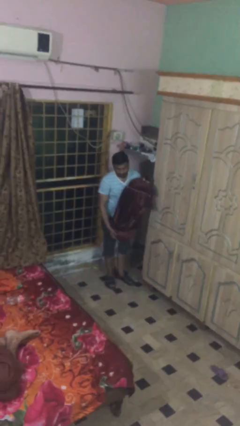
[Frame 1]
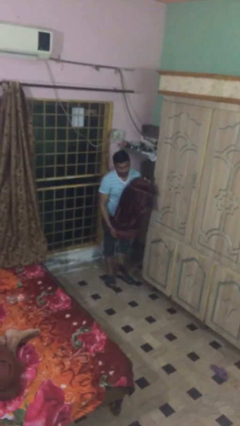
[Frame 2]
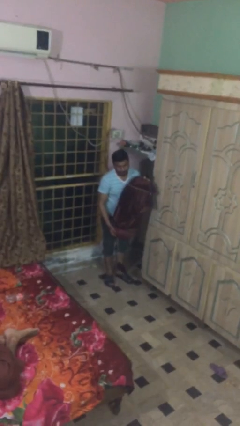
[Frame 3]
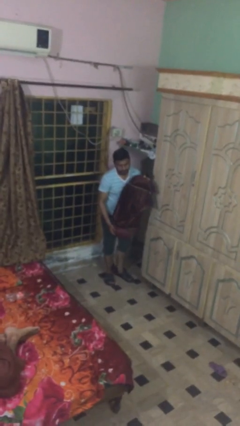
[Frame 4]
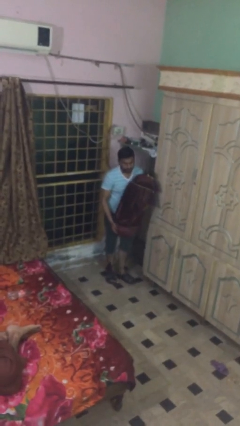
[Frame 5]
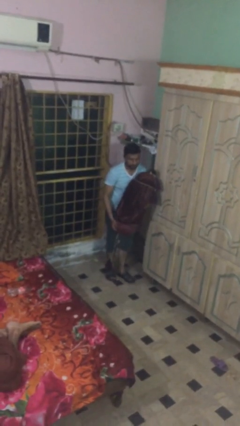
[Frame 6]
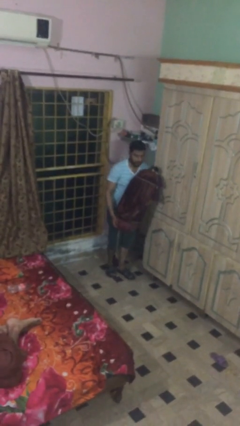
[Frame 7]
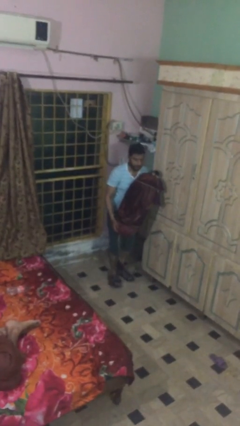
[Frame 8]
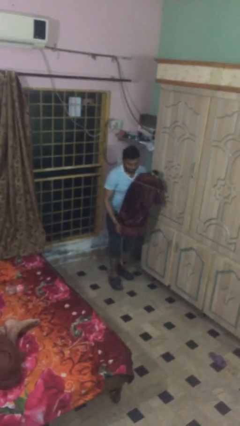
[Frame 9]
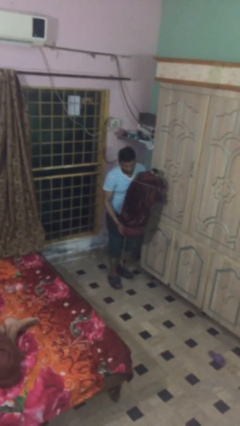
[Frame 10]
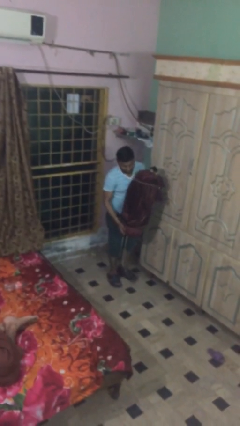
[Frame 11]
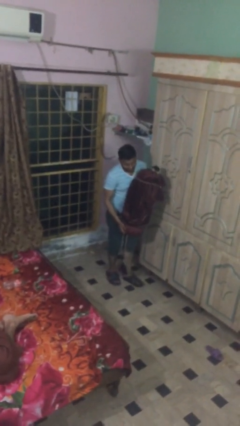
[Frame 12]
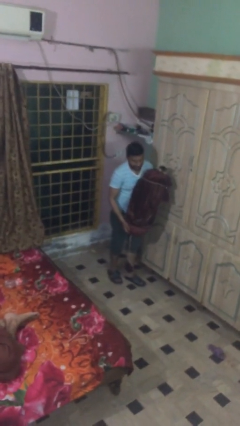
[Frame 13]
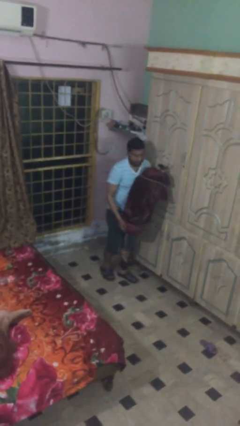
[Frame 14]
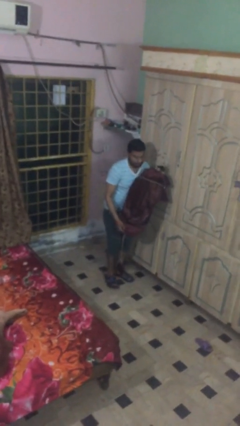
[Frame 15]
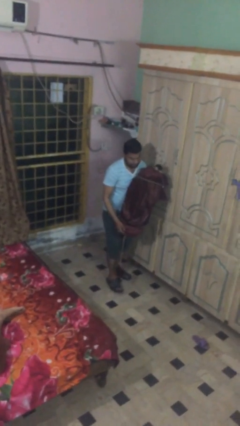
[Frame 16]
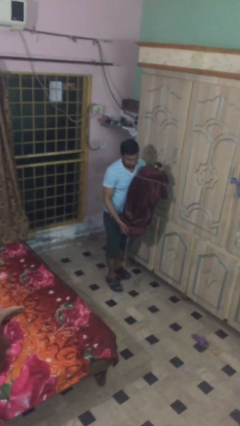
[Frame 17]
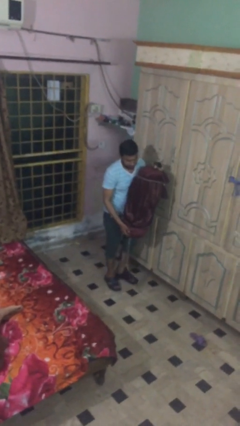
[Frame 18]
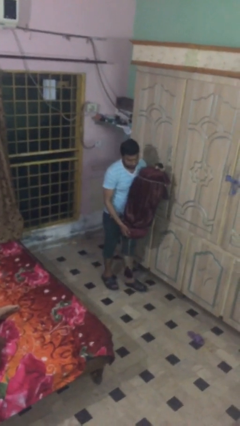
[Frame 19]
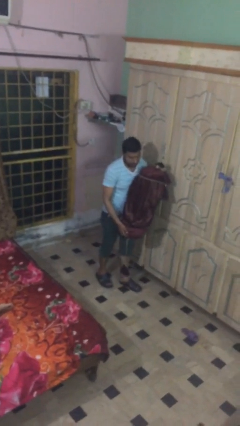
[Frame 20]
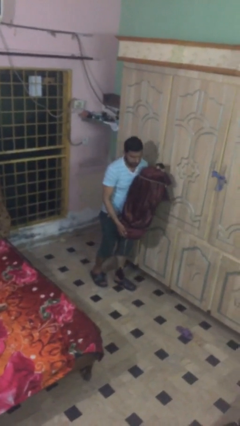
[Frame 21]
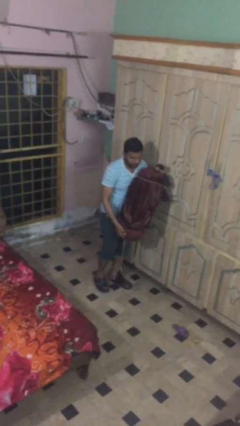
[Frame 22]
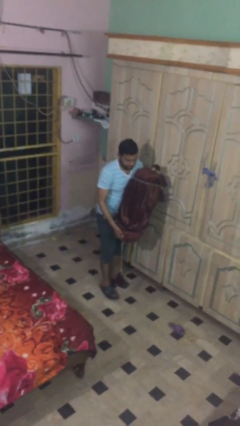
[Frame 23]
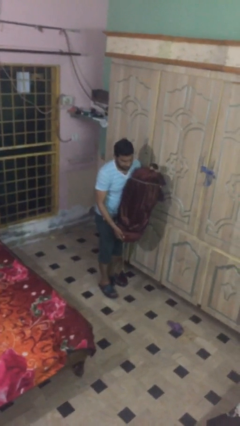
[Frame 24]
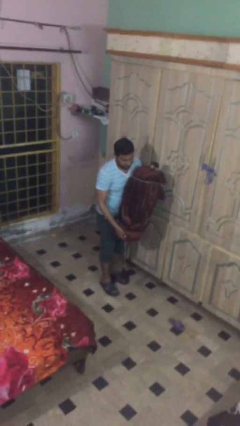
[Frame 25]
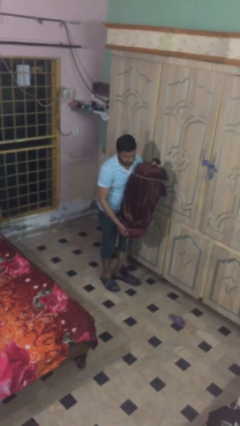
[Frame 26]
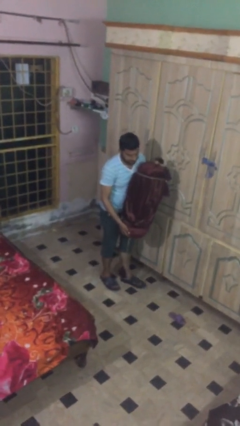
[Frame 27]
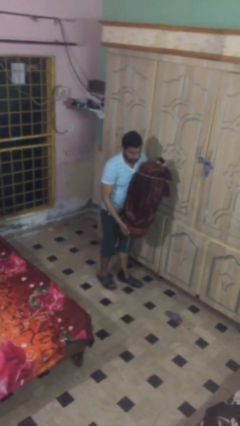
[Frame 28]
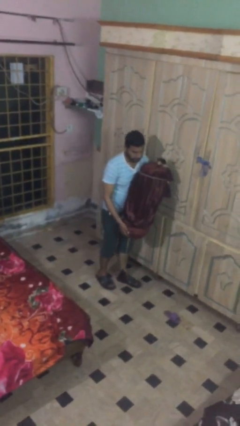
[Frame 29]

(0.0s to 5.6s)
person carries heavy object

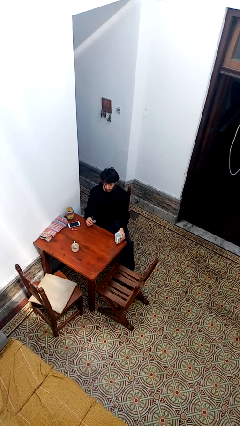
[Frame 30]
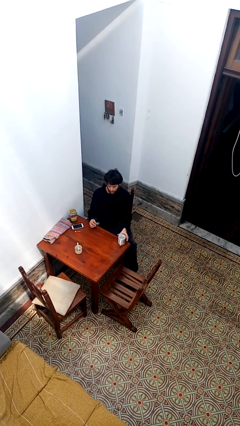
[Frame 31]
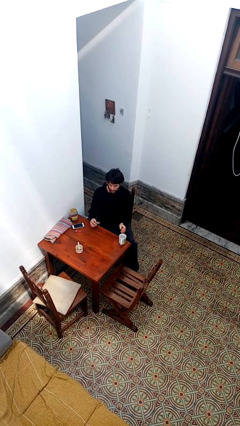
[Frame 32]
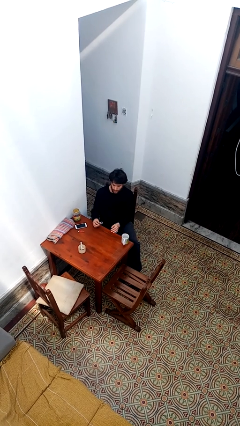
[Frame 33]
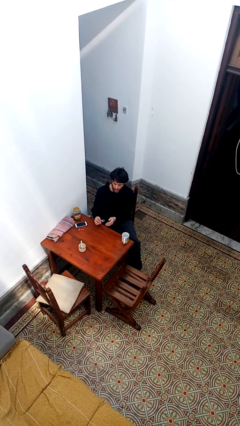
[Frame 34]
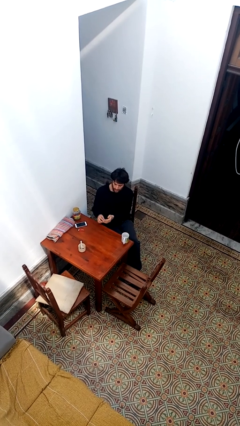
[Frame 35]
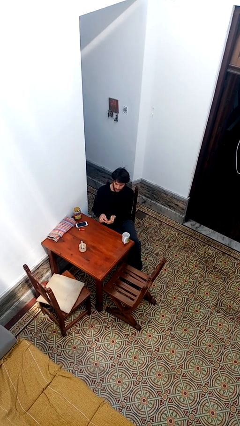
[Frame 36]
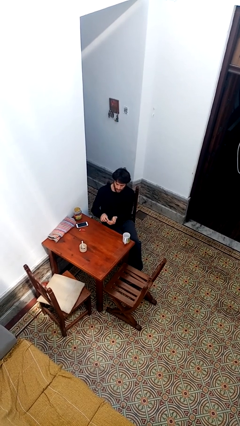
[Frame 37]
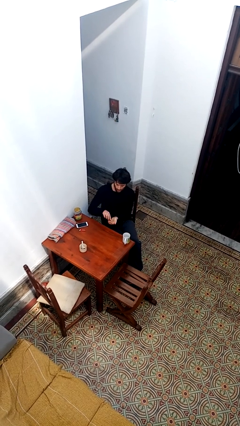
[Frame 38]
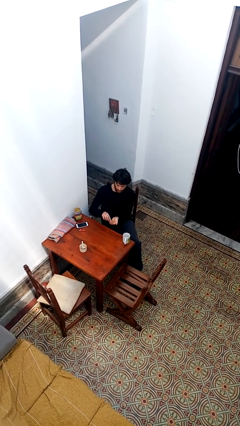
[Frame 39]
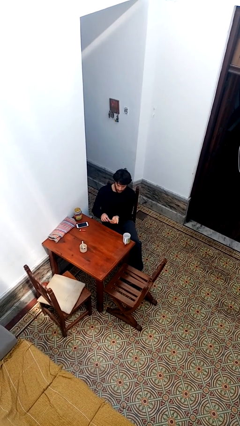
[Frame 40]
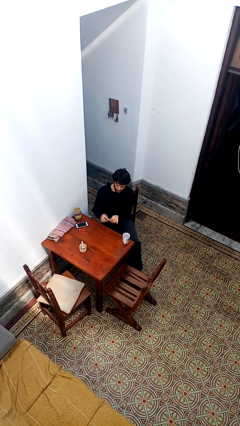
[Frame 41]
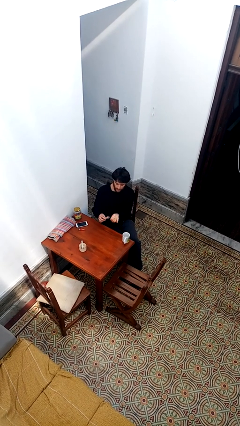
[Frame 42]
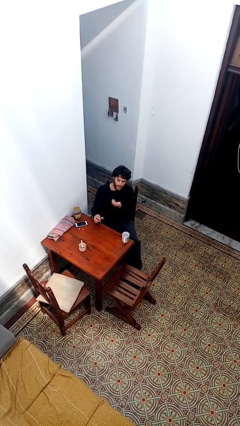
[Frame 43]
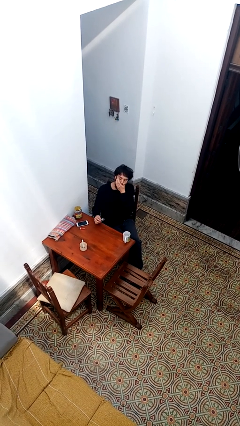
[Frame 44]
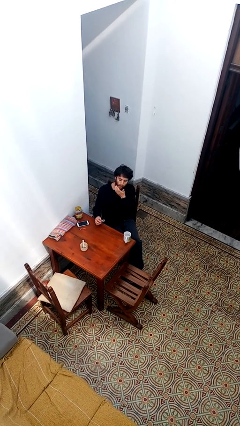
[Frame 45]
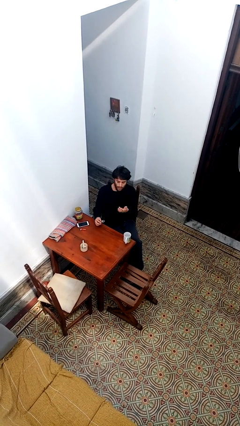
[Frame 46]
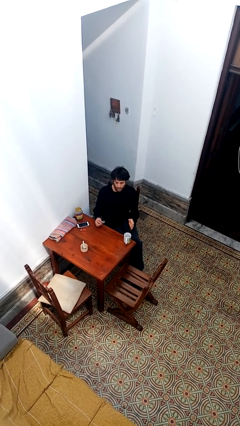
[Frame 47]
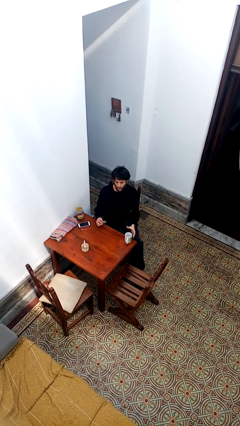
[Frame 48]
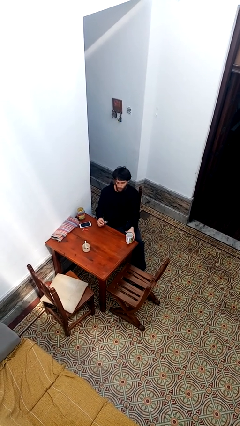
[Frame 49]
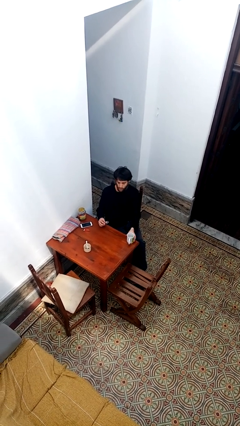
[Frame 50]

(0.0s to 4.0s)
person takes medicine pills

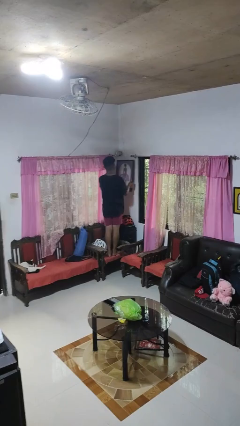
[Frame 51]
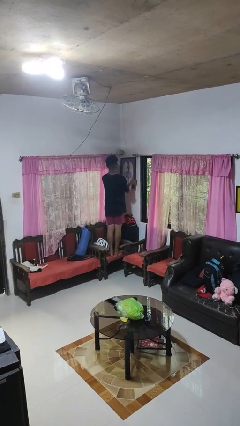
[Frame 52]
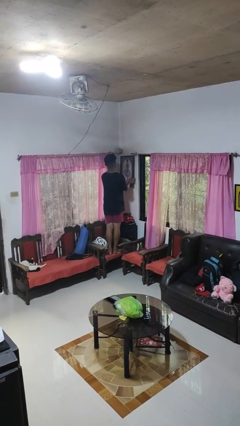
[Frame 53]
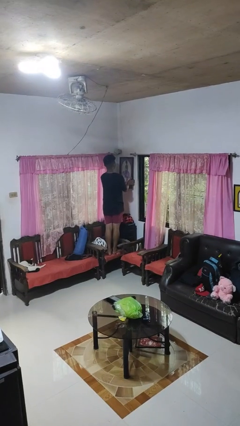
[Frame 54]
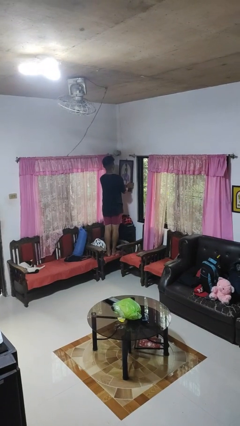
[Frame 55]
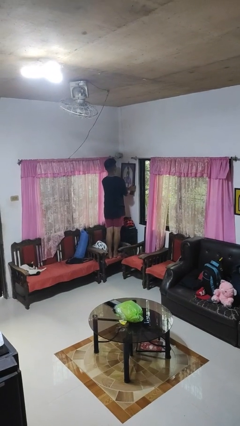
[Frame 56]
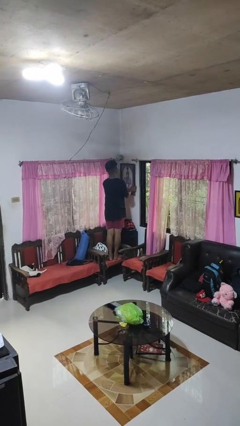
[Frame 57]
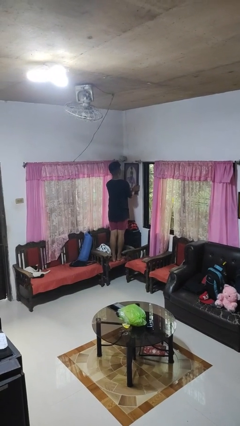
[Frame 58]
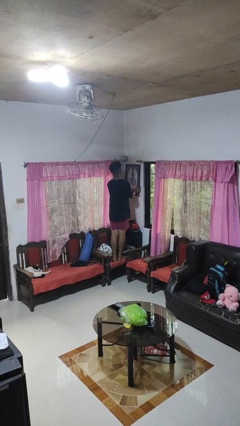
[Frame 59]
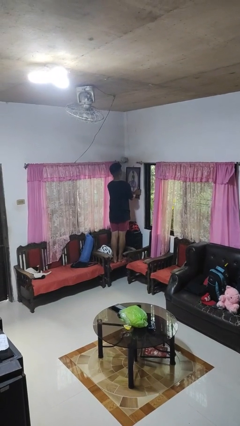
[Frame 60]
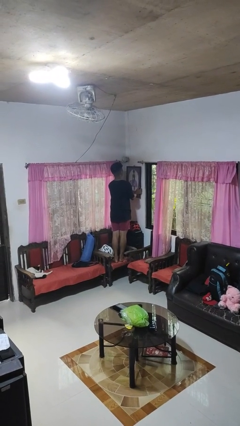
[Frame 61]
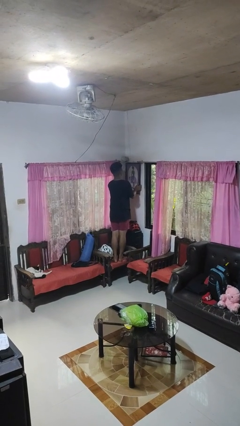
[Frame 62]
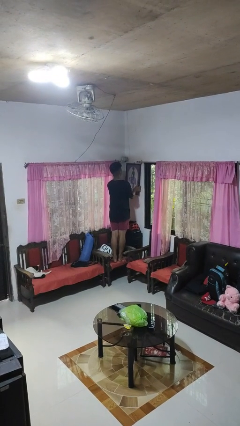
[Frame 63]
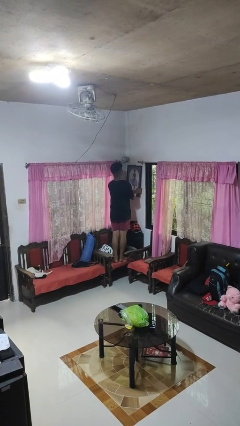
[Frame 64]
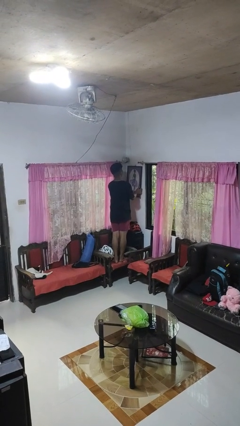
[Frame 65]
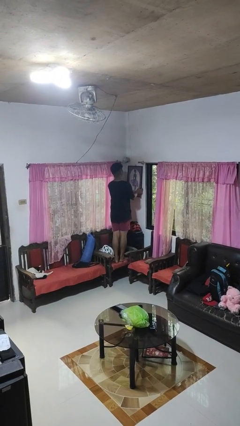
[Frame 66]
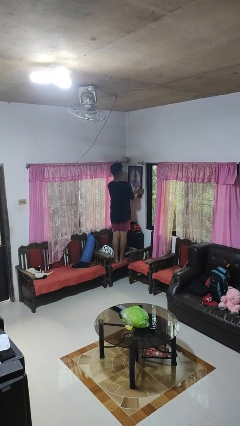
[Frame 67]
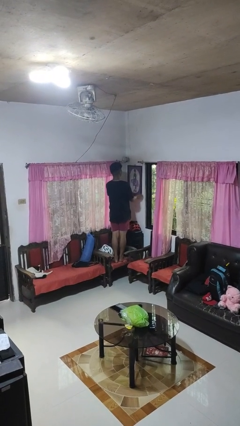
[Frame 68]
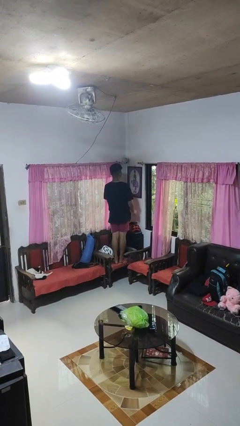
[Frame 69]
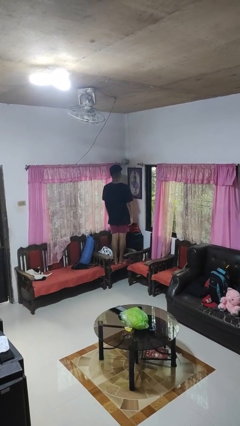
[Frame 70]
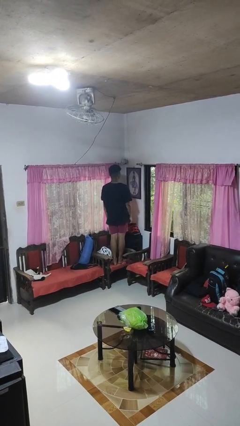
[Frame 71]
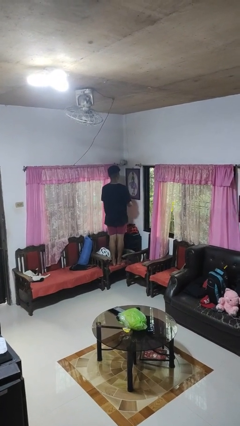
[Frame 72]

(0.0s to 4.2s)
person puts up picture frame

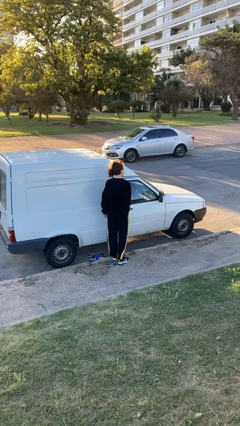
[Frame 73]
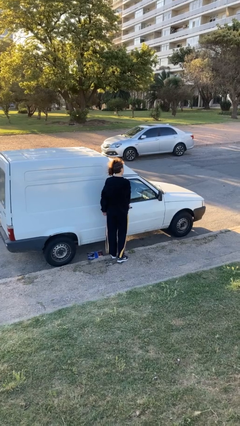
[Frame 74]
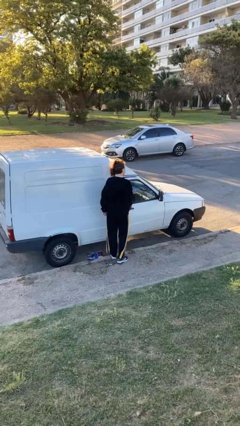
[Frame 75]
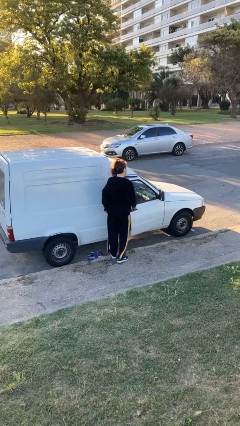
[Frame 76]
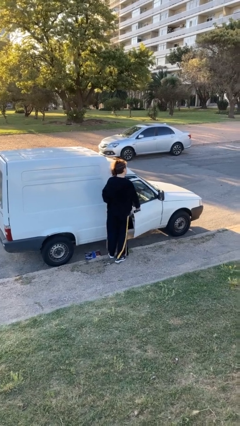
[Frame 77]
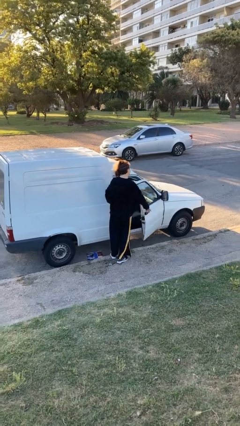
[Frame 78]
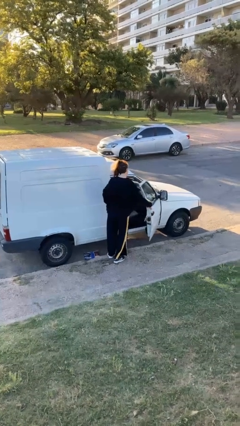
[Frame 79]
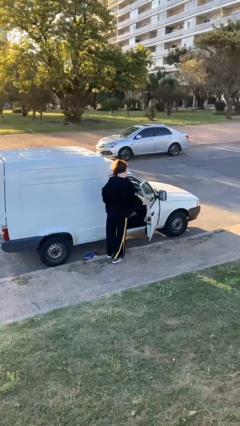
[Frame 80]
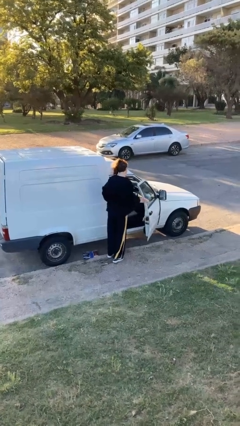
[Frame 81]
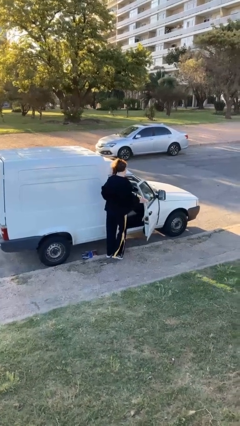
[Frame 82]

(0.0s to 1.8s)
person opens car door

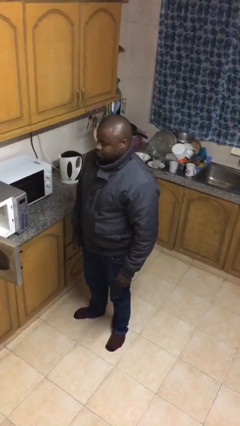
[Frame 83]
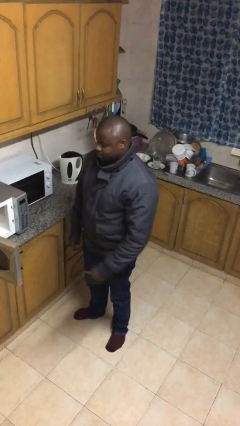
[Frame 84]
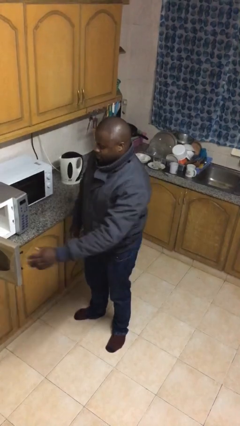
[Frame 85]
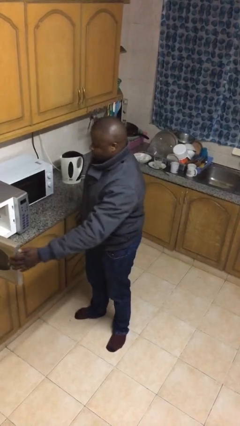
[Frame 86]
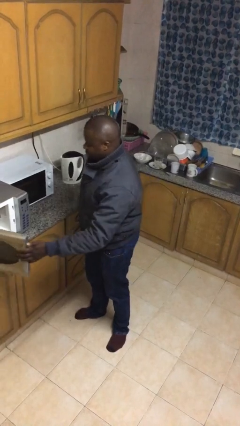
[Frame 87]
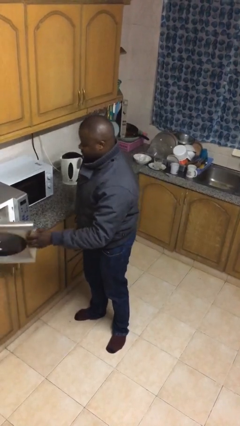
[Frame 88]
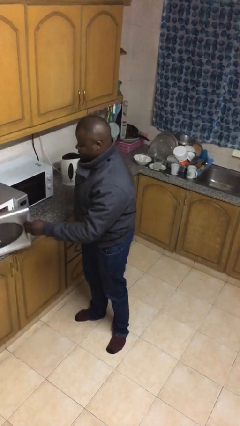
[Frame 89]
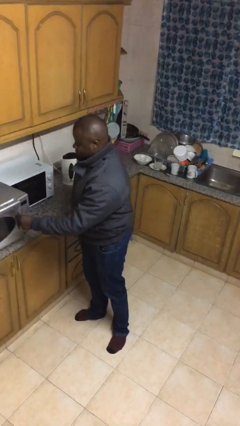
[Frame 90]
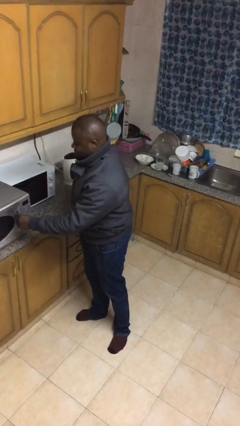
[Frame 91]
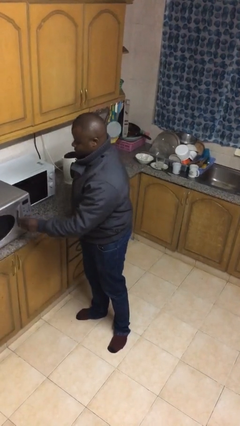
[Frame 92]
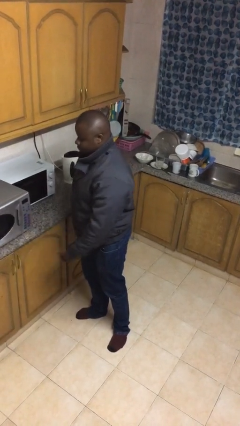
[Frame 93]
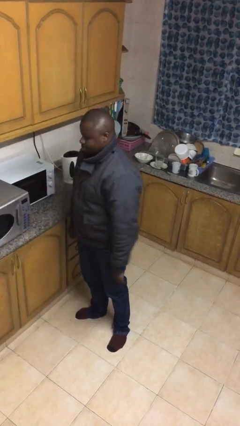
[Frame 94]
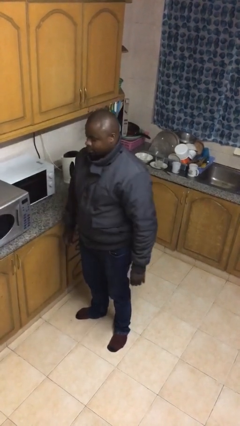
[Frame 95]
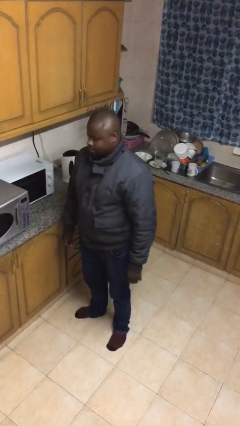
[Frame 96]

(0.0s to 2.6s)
person closes microwave
